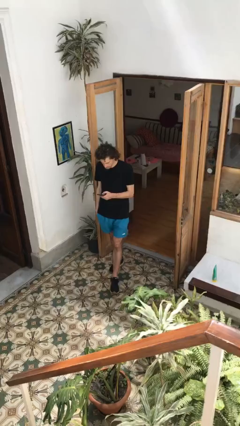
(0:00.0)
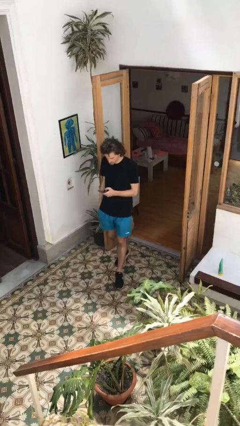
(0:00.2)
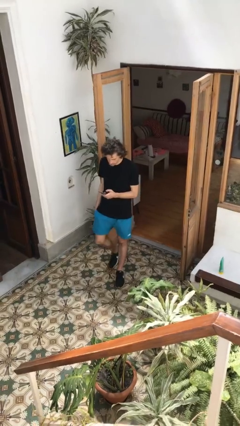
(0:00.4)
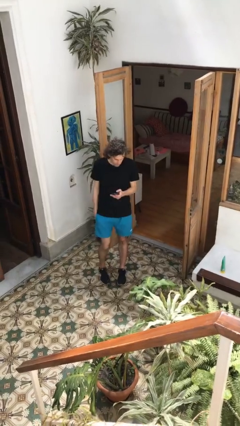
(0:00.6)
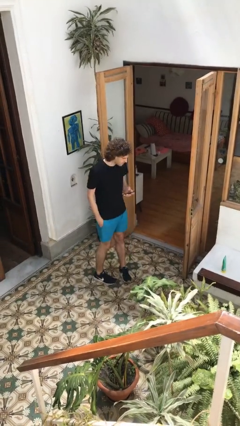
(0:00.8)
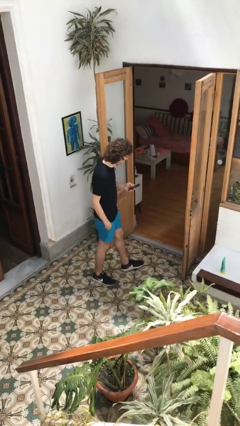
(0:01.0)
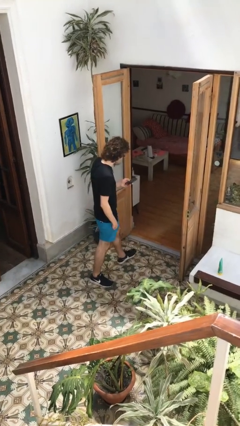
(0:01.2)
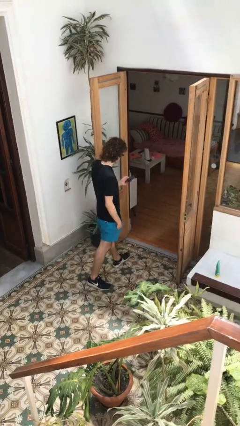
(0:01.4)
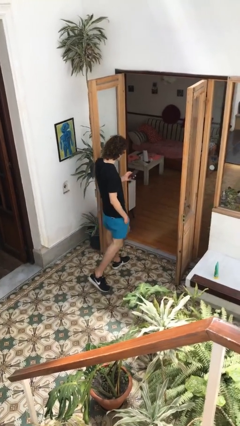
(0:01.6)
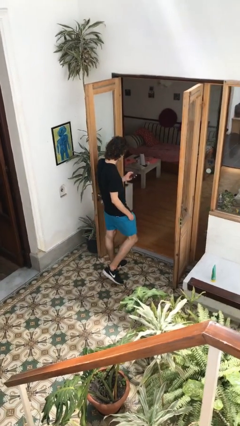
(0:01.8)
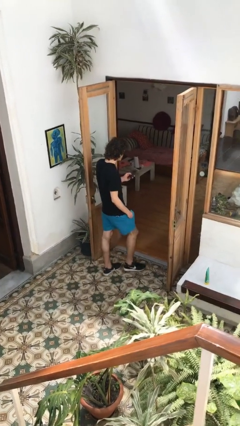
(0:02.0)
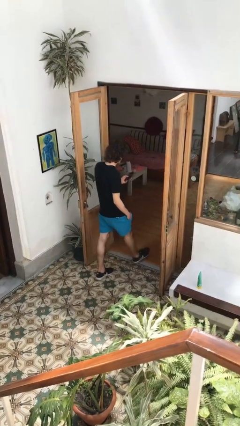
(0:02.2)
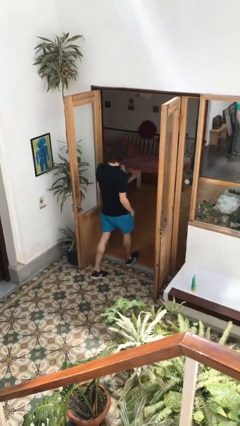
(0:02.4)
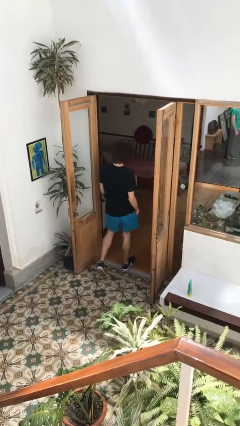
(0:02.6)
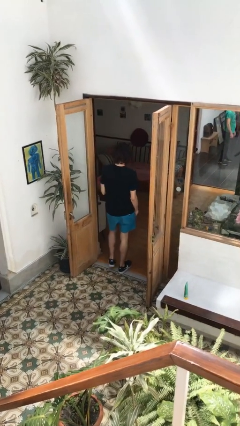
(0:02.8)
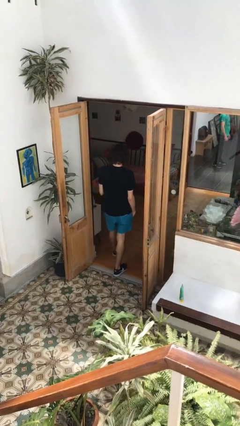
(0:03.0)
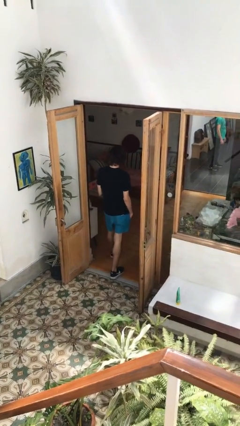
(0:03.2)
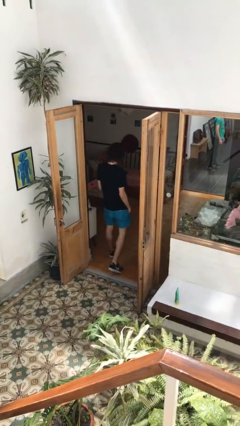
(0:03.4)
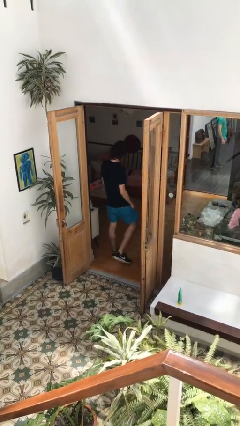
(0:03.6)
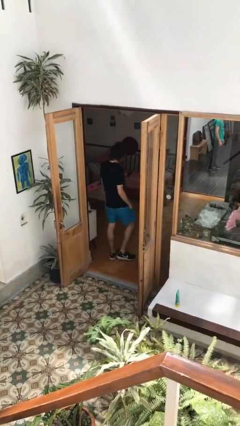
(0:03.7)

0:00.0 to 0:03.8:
person exits scene through structure

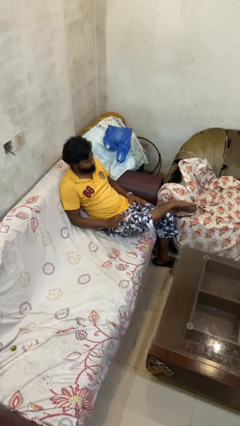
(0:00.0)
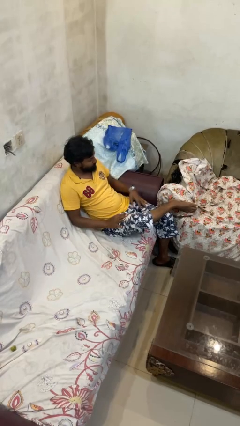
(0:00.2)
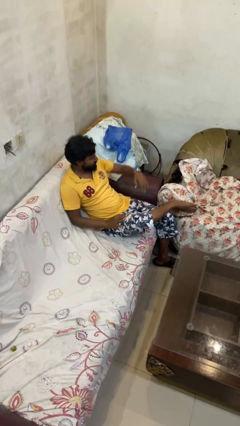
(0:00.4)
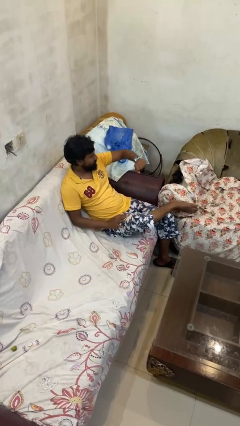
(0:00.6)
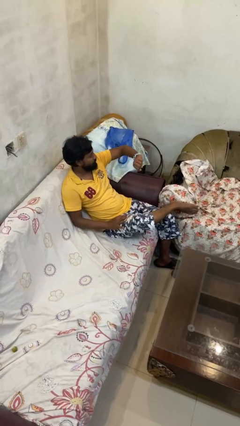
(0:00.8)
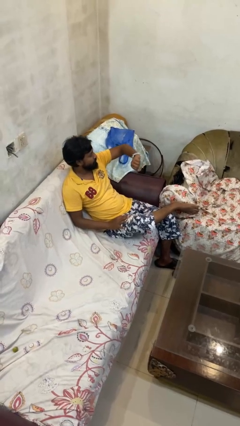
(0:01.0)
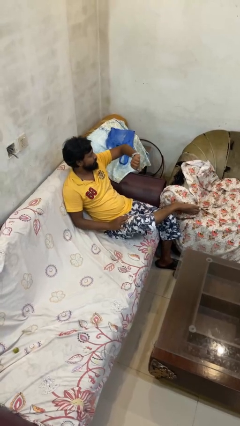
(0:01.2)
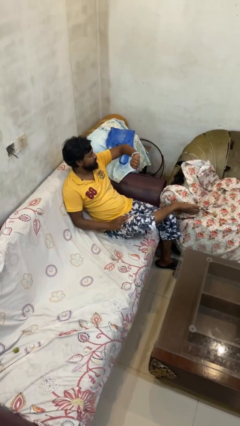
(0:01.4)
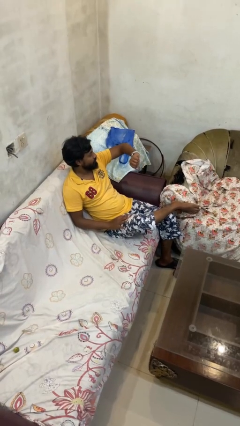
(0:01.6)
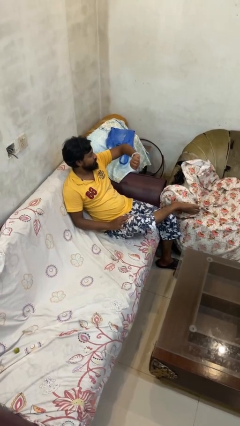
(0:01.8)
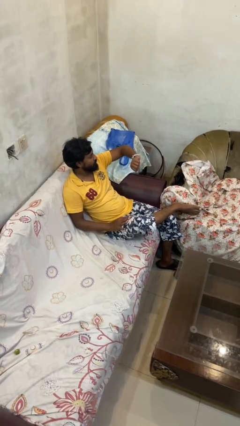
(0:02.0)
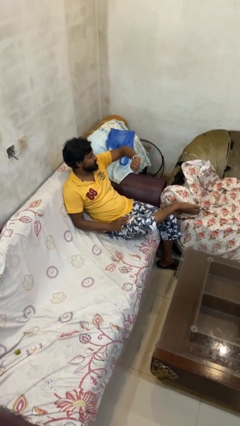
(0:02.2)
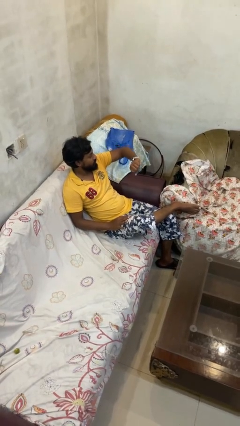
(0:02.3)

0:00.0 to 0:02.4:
person looks at wristwatch

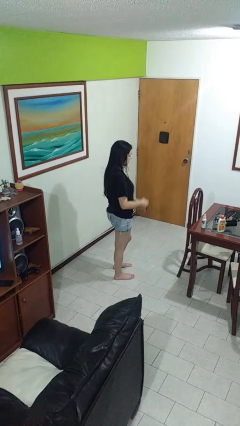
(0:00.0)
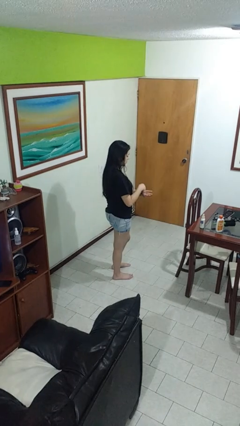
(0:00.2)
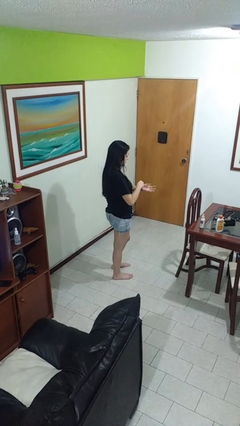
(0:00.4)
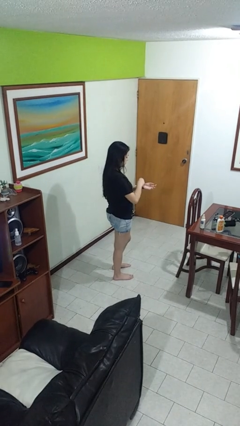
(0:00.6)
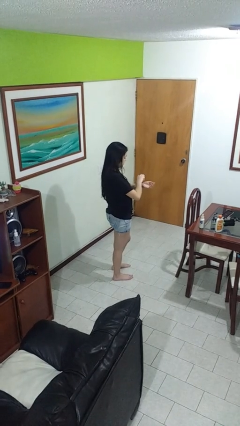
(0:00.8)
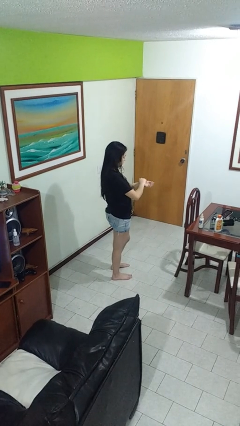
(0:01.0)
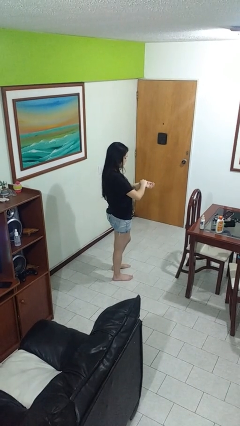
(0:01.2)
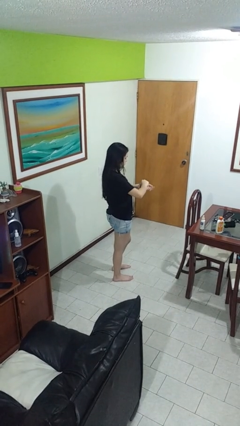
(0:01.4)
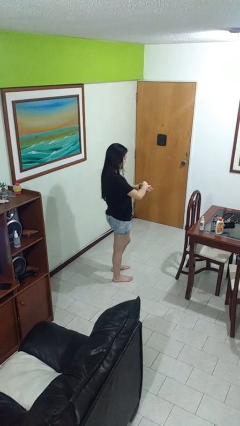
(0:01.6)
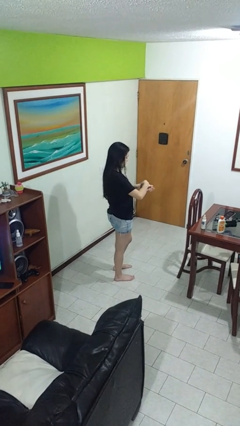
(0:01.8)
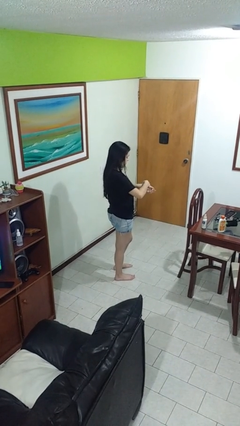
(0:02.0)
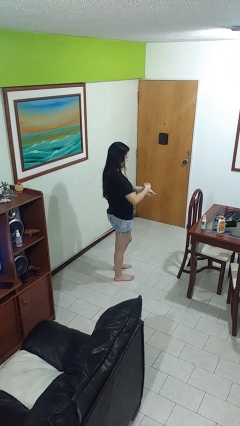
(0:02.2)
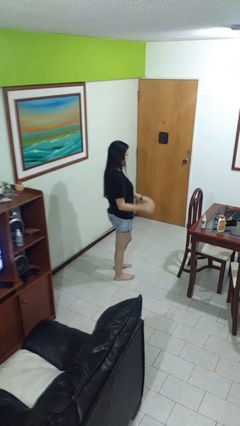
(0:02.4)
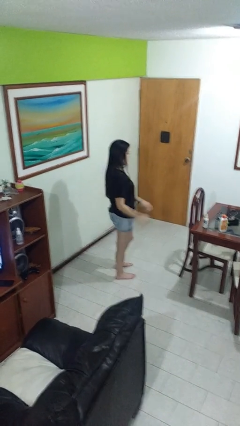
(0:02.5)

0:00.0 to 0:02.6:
person puts on wristwatch

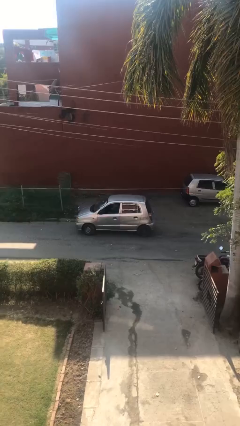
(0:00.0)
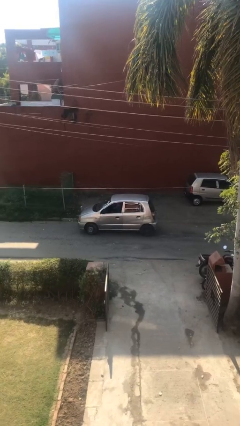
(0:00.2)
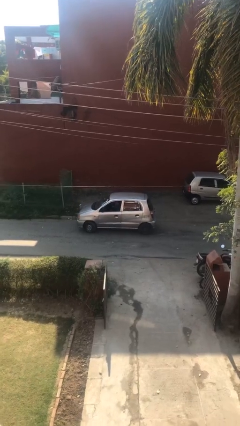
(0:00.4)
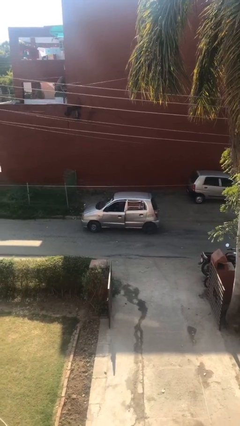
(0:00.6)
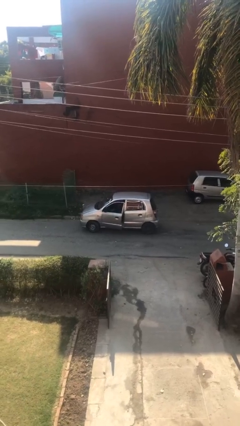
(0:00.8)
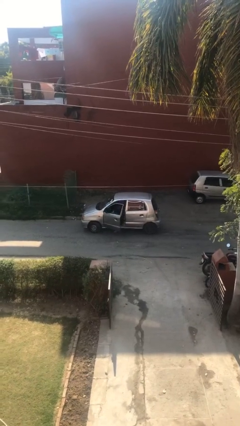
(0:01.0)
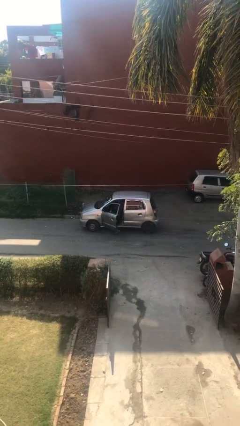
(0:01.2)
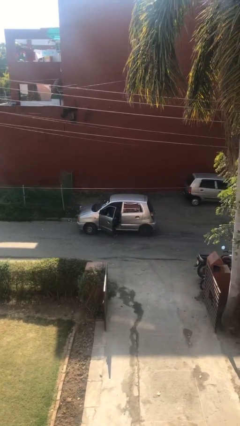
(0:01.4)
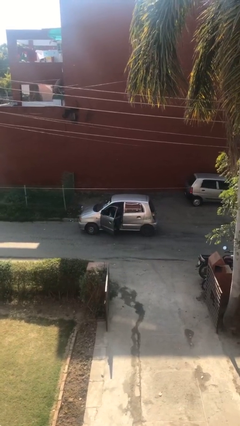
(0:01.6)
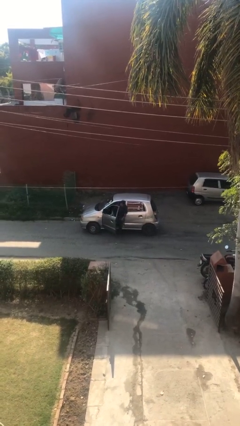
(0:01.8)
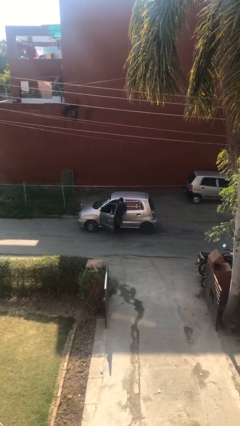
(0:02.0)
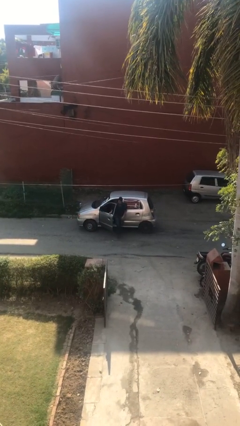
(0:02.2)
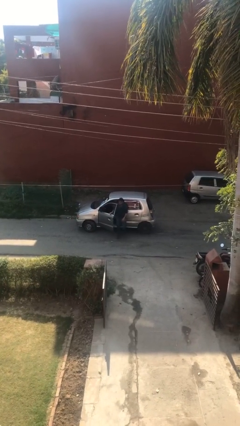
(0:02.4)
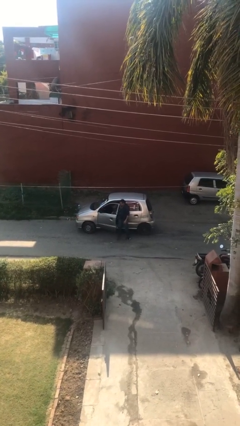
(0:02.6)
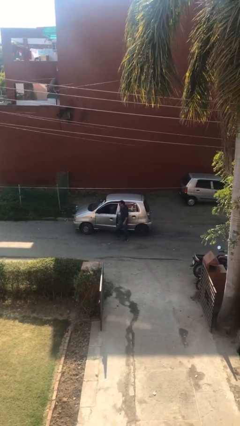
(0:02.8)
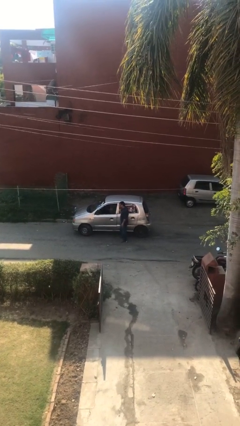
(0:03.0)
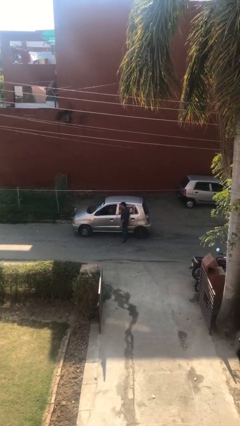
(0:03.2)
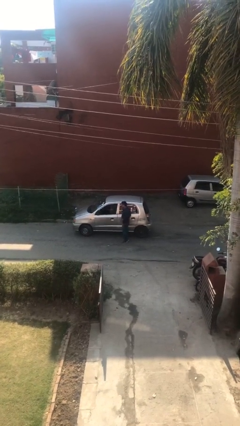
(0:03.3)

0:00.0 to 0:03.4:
car drops off person

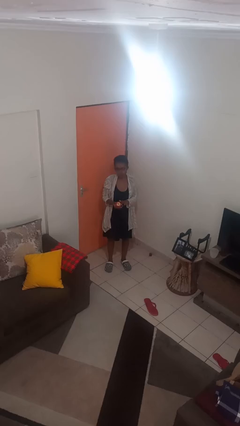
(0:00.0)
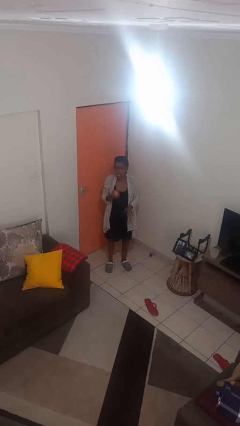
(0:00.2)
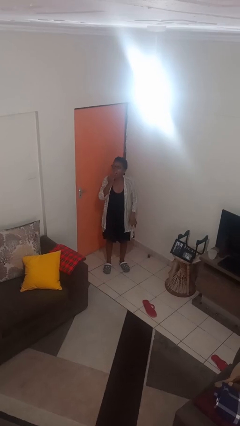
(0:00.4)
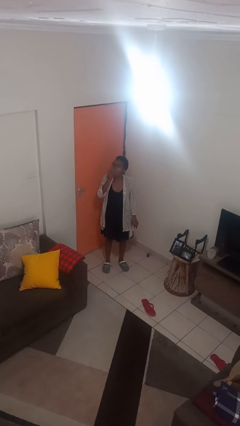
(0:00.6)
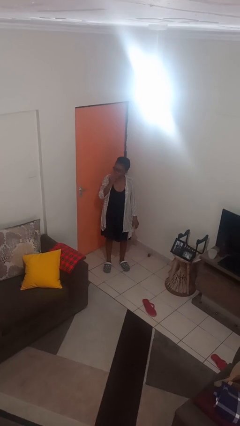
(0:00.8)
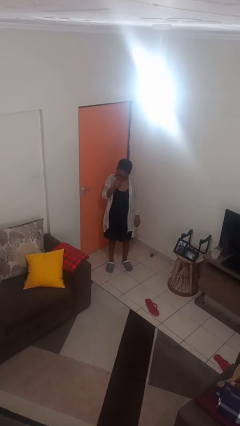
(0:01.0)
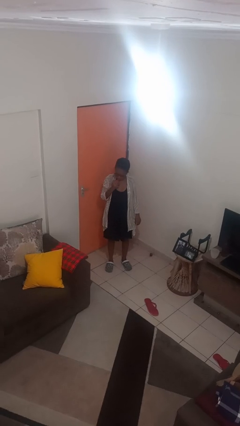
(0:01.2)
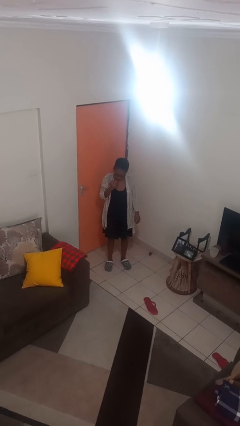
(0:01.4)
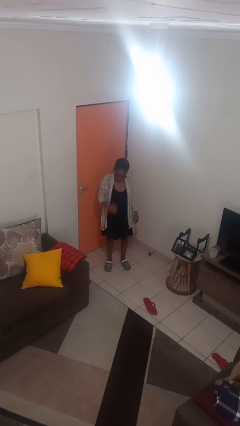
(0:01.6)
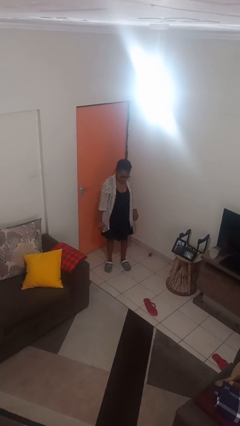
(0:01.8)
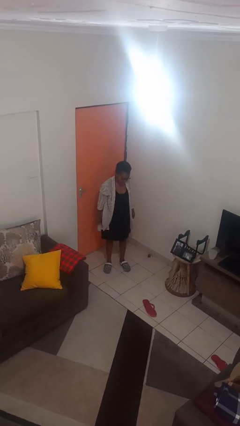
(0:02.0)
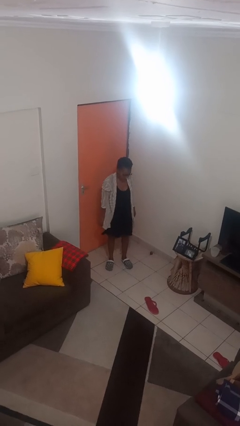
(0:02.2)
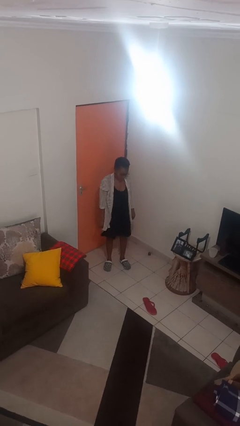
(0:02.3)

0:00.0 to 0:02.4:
person eats apple

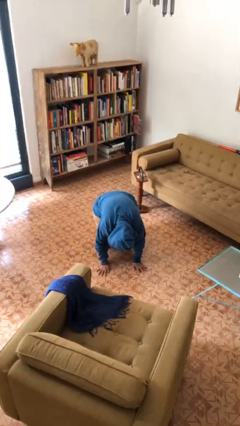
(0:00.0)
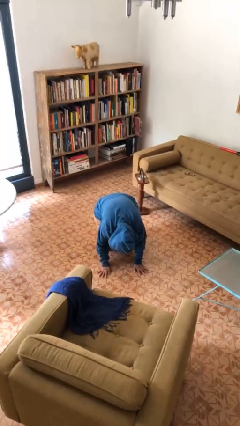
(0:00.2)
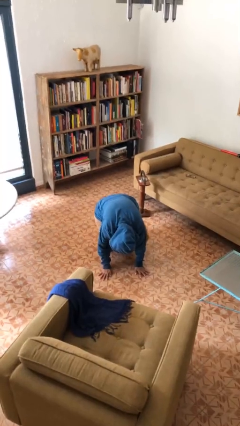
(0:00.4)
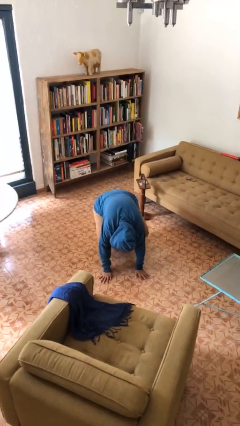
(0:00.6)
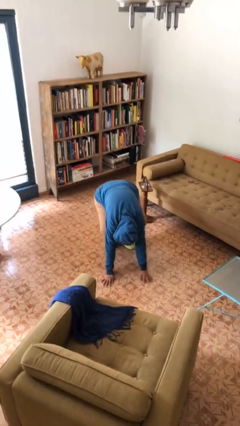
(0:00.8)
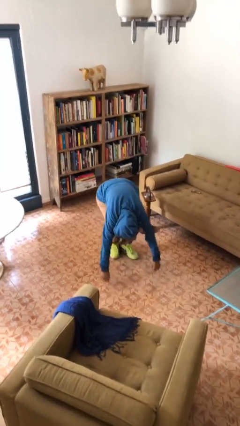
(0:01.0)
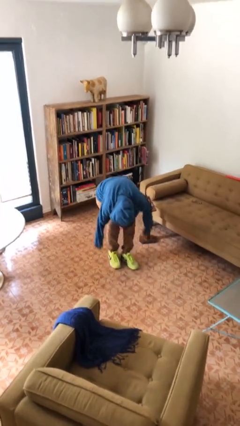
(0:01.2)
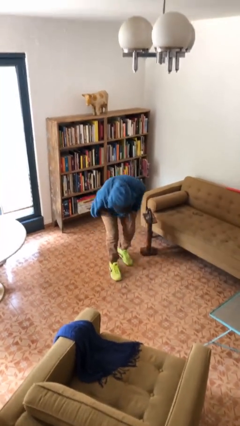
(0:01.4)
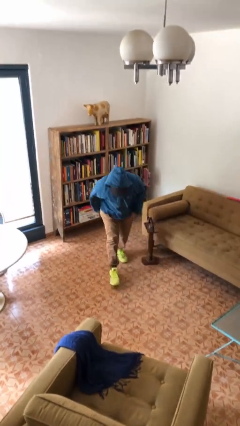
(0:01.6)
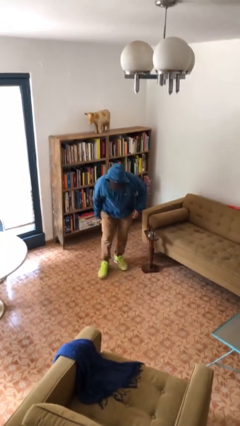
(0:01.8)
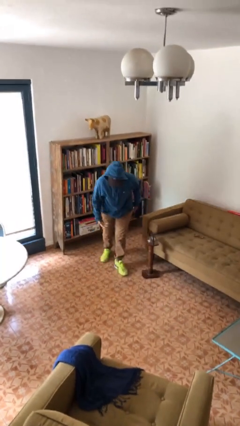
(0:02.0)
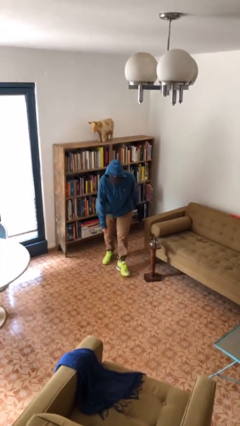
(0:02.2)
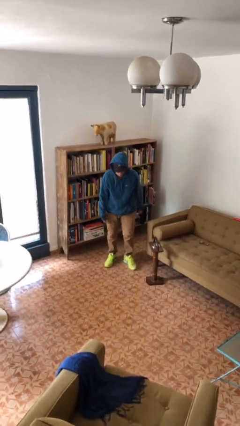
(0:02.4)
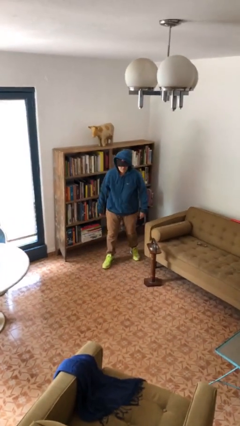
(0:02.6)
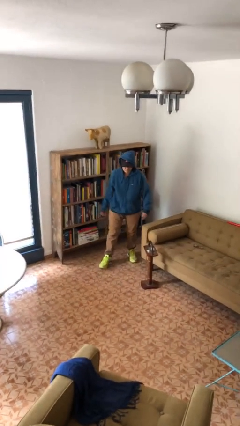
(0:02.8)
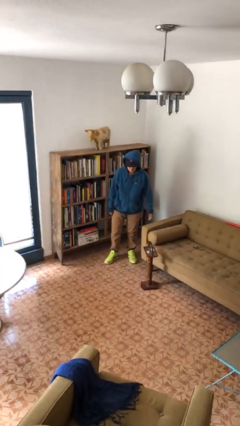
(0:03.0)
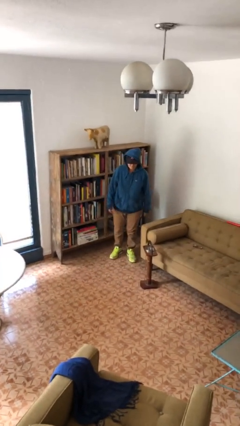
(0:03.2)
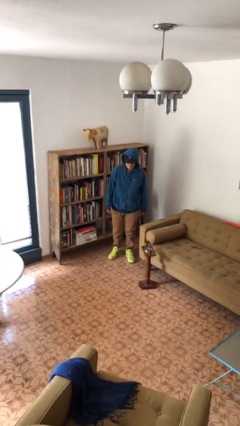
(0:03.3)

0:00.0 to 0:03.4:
person stands up from floor
